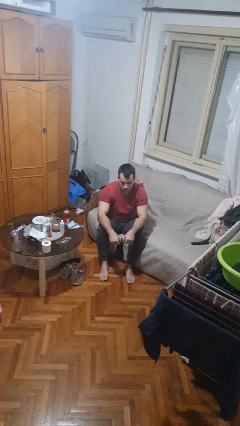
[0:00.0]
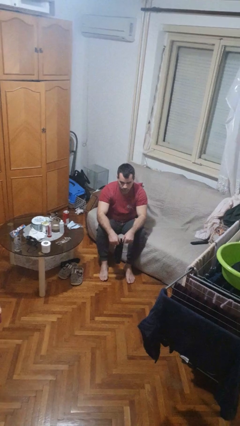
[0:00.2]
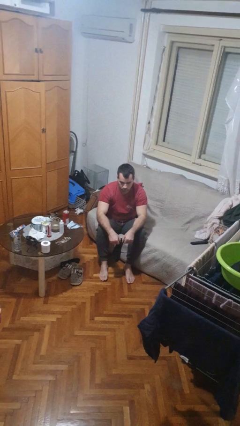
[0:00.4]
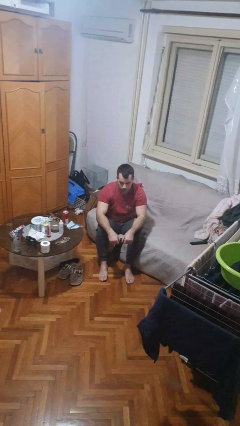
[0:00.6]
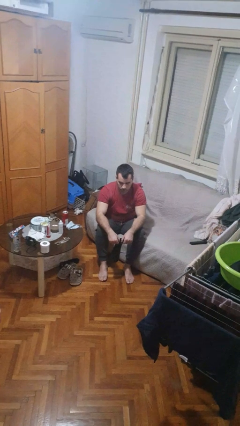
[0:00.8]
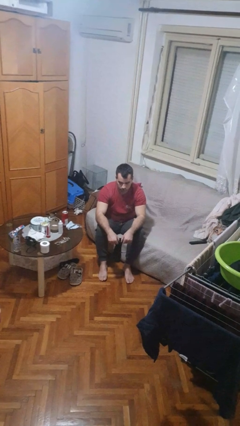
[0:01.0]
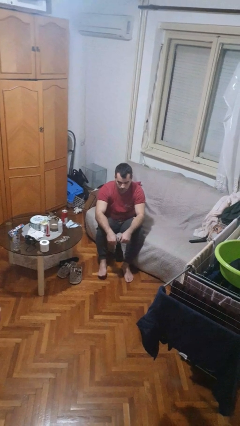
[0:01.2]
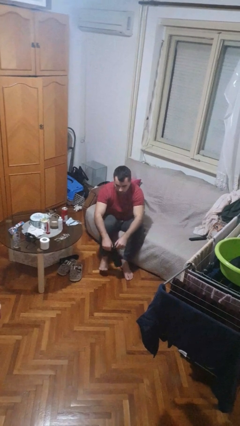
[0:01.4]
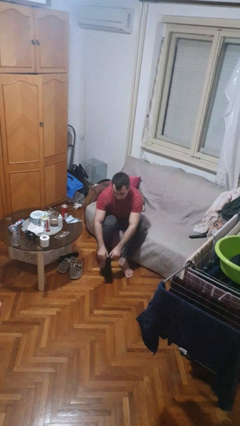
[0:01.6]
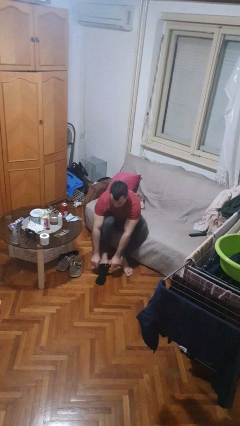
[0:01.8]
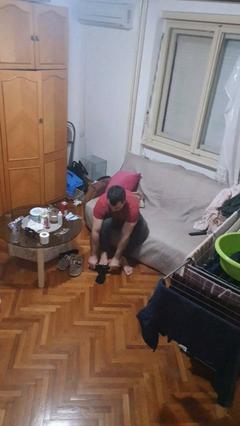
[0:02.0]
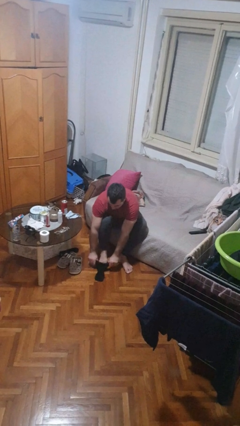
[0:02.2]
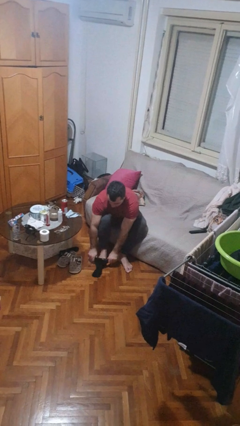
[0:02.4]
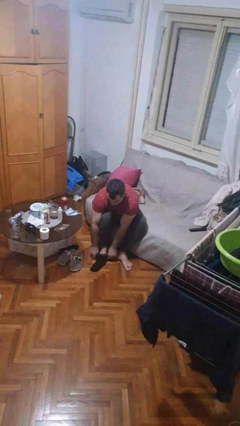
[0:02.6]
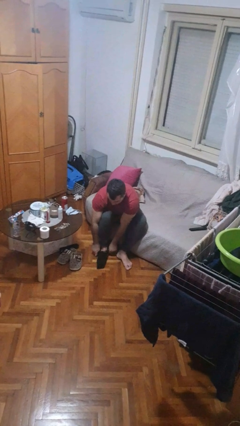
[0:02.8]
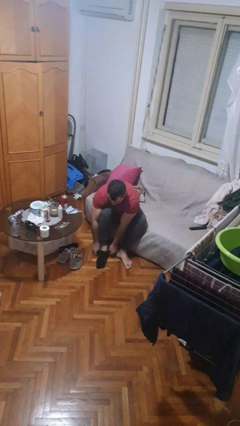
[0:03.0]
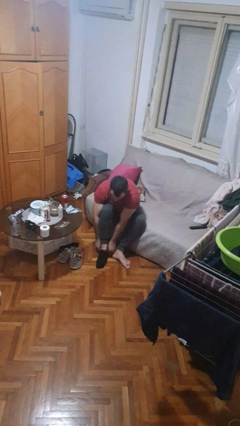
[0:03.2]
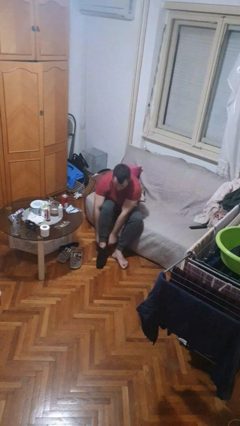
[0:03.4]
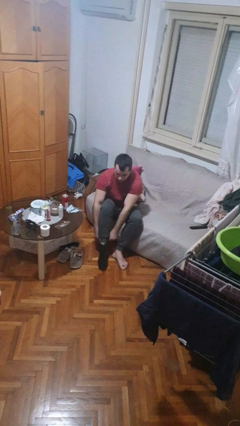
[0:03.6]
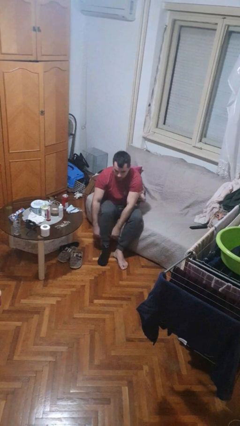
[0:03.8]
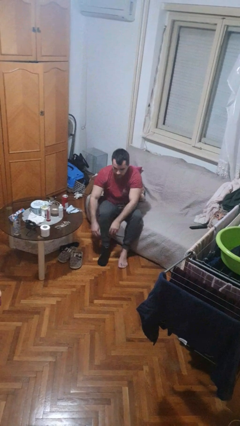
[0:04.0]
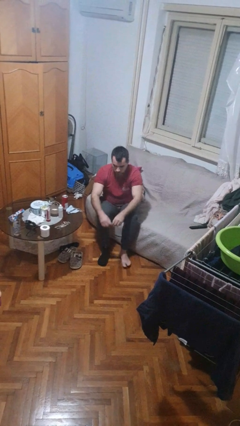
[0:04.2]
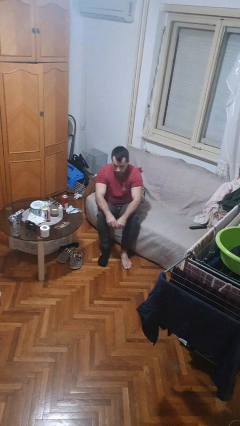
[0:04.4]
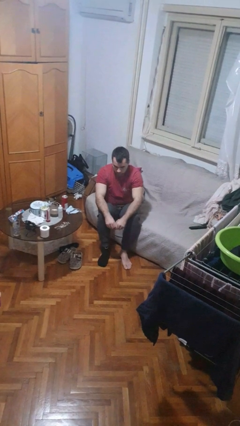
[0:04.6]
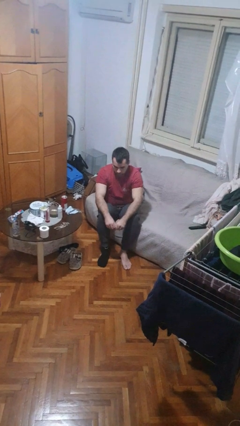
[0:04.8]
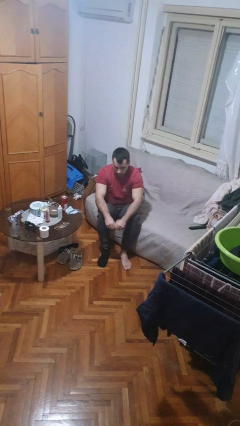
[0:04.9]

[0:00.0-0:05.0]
person puts on socks

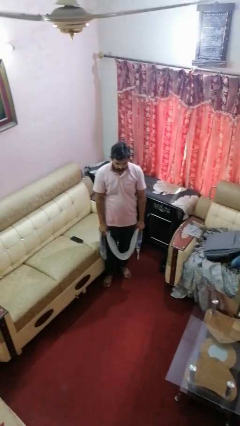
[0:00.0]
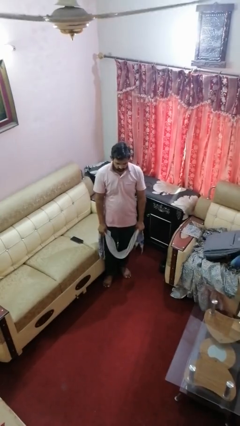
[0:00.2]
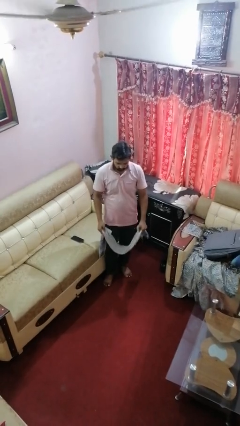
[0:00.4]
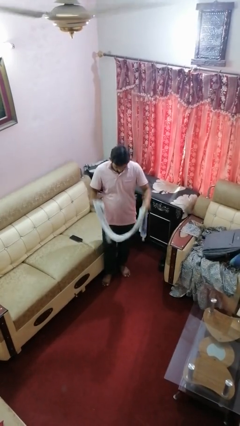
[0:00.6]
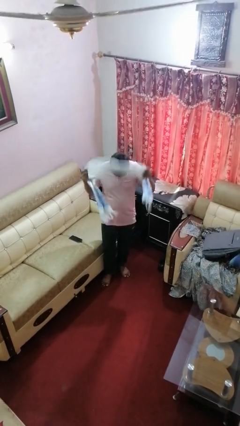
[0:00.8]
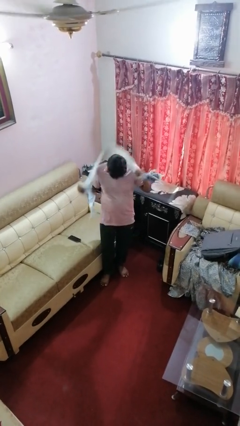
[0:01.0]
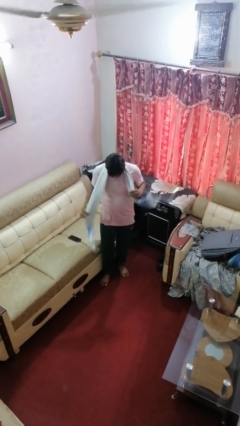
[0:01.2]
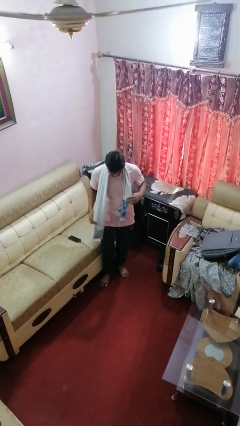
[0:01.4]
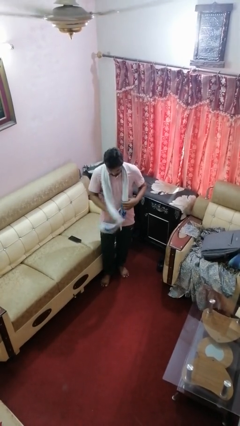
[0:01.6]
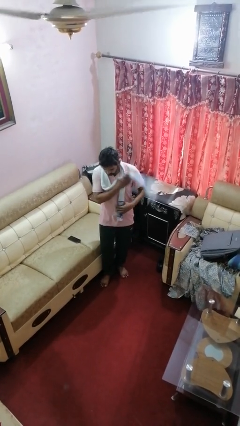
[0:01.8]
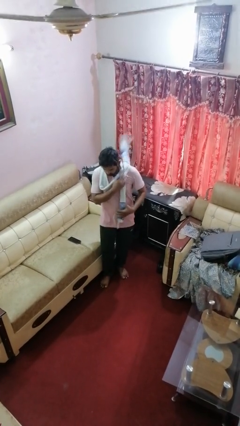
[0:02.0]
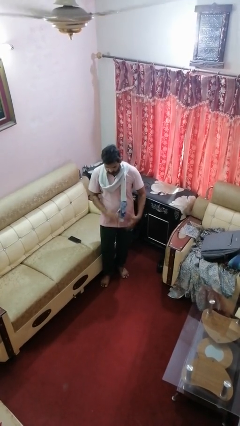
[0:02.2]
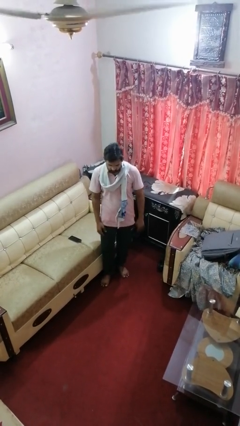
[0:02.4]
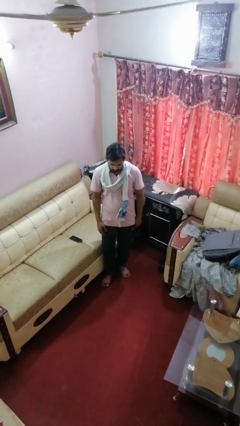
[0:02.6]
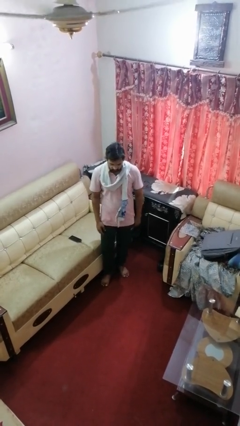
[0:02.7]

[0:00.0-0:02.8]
person puts on scarf

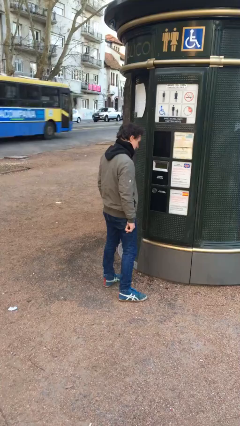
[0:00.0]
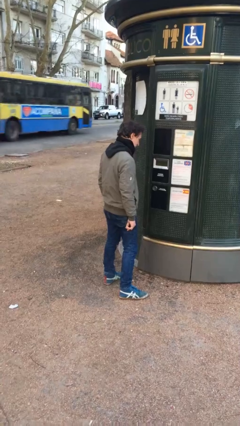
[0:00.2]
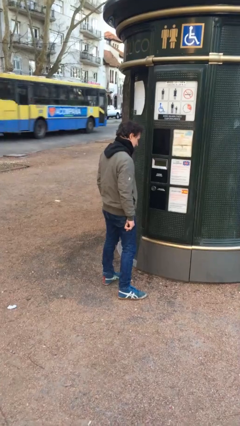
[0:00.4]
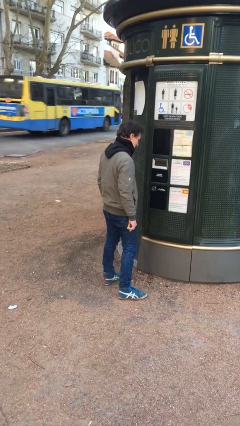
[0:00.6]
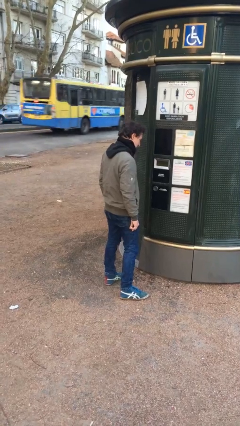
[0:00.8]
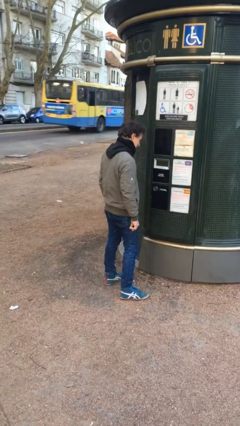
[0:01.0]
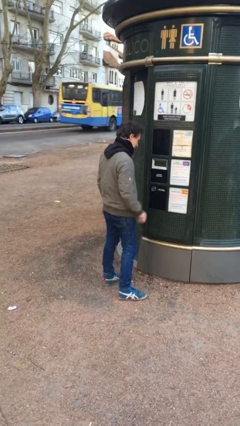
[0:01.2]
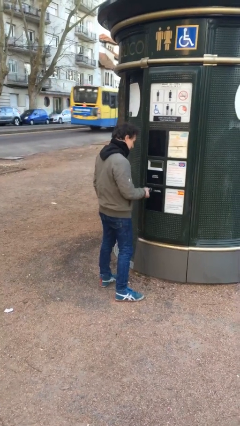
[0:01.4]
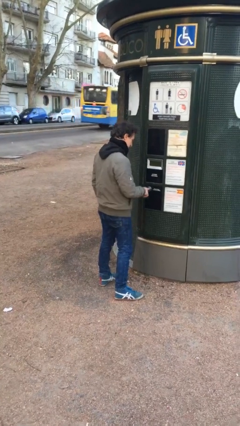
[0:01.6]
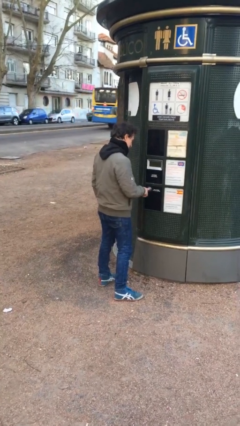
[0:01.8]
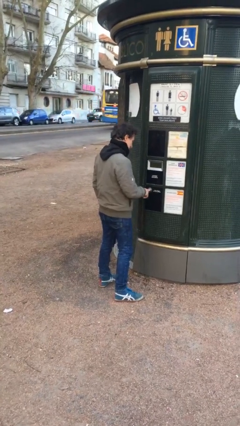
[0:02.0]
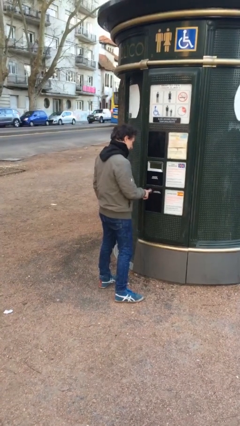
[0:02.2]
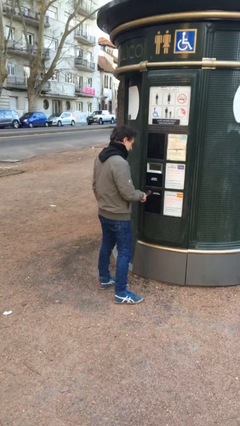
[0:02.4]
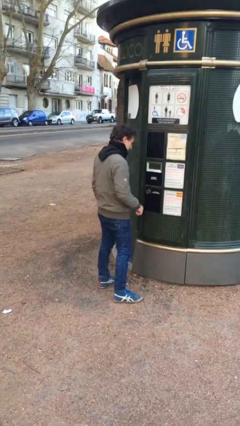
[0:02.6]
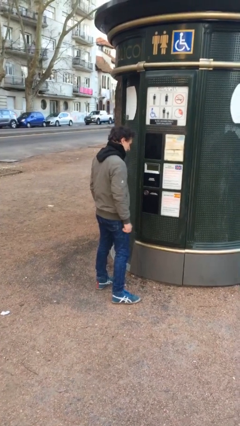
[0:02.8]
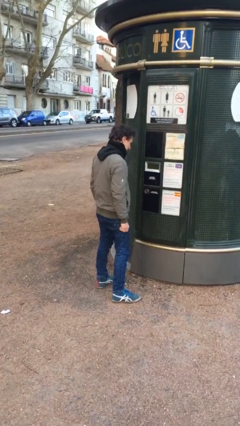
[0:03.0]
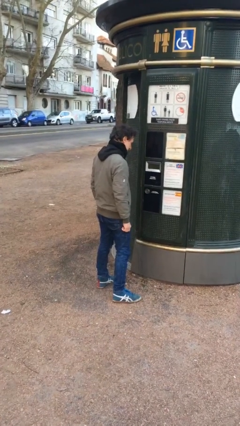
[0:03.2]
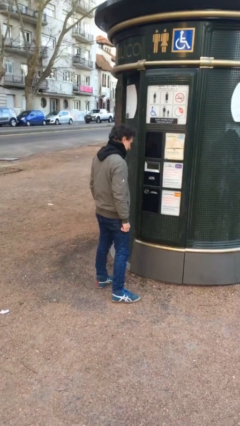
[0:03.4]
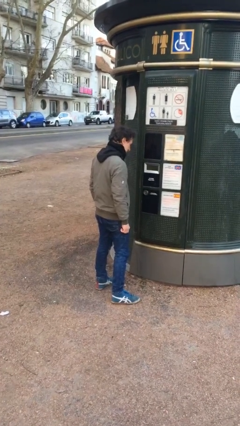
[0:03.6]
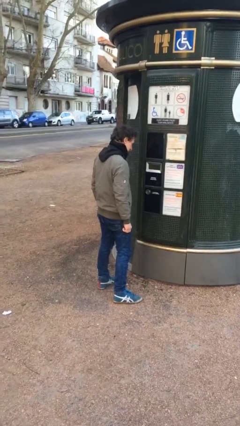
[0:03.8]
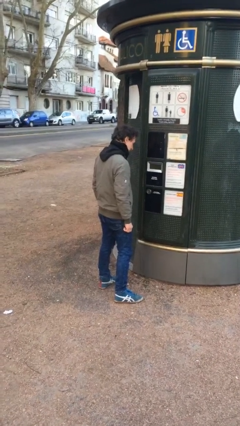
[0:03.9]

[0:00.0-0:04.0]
person purchases from machine

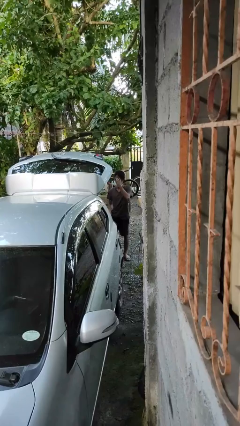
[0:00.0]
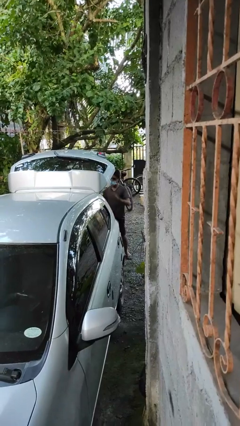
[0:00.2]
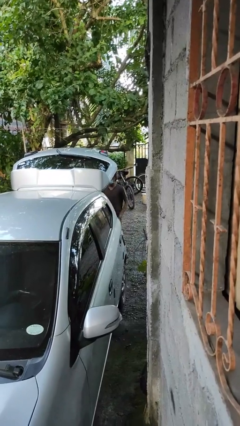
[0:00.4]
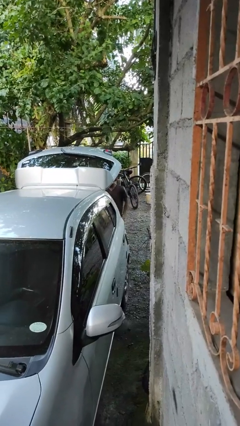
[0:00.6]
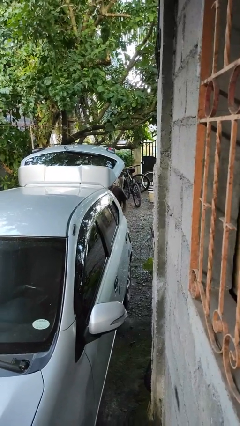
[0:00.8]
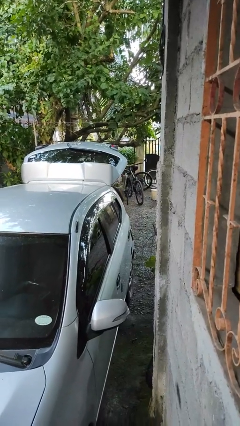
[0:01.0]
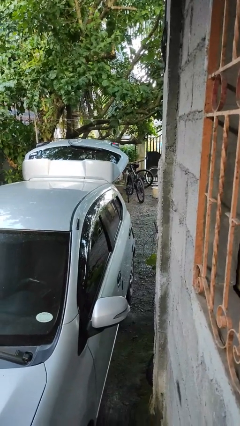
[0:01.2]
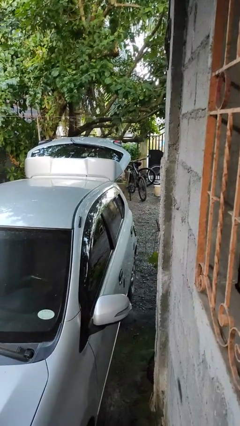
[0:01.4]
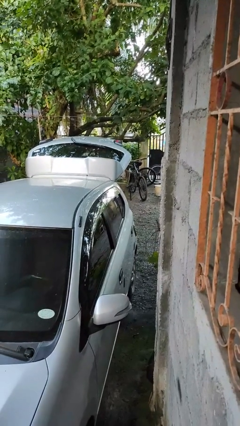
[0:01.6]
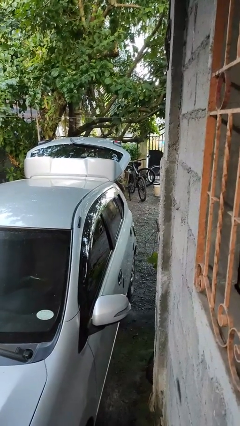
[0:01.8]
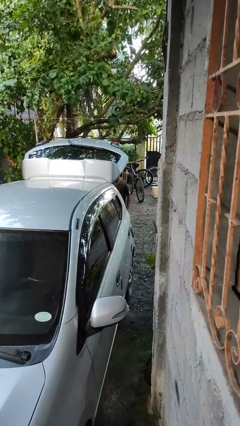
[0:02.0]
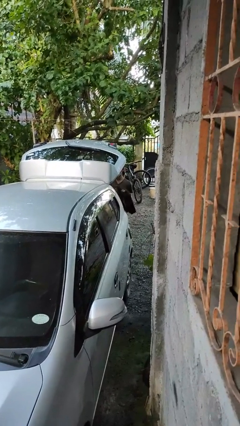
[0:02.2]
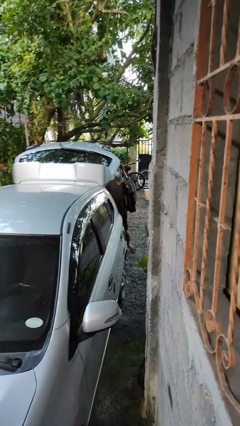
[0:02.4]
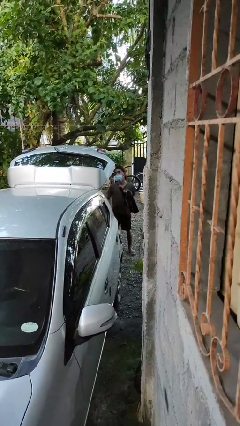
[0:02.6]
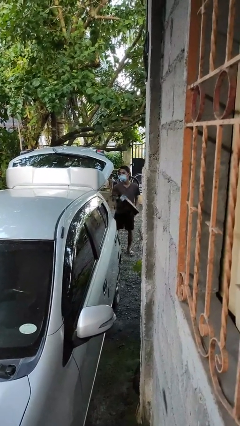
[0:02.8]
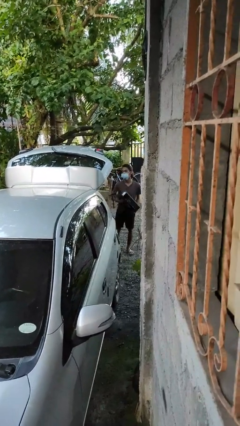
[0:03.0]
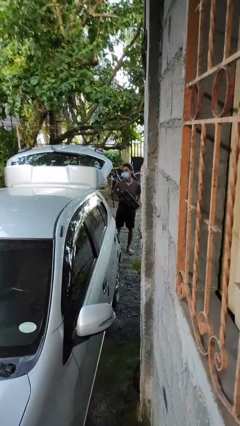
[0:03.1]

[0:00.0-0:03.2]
person unloads car

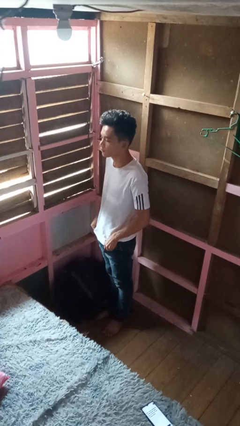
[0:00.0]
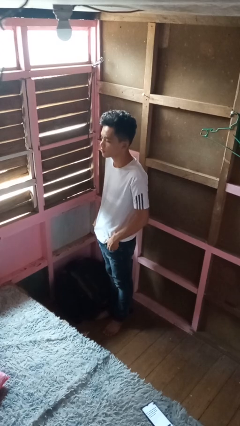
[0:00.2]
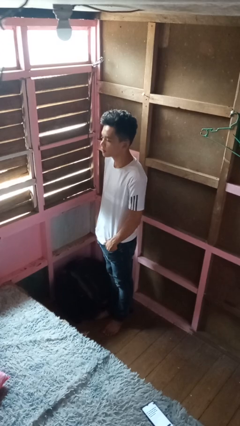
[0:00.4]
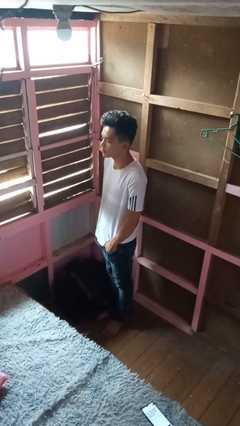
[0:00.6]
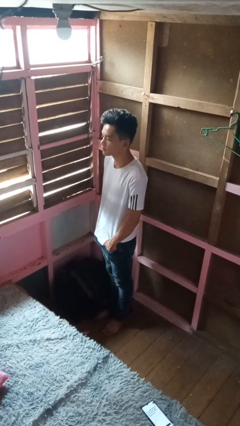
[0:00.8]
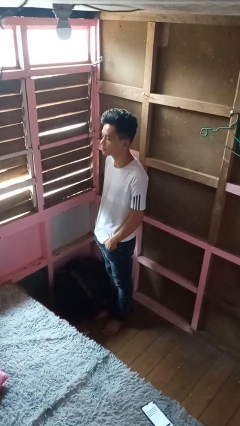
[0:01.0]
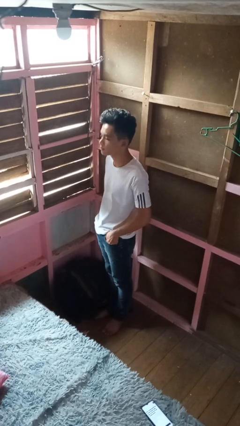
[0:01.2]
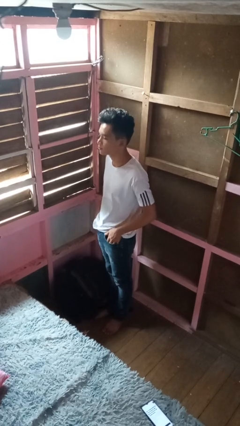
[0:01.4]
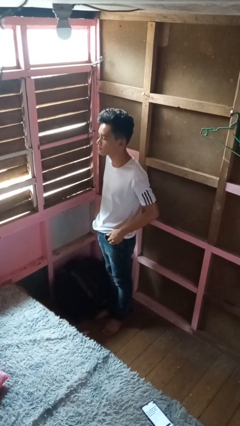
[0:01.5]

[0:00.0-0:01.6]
person puts hands in back pockets

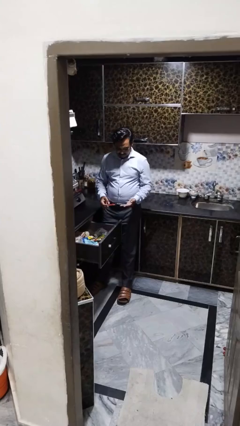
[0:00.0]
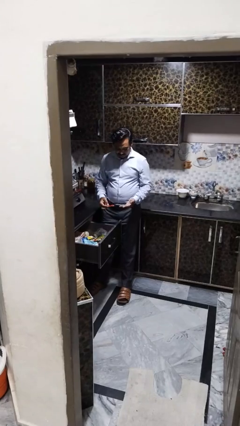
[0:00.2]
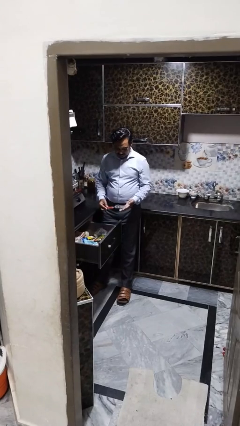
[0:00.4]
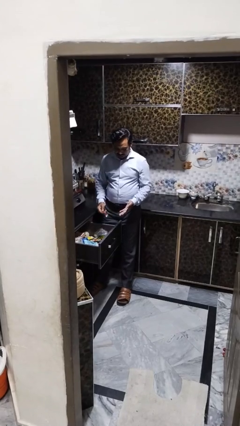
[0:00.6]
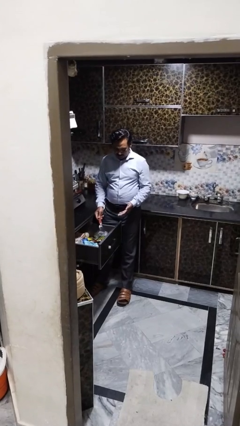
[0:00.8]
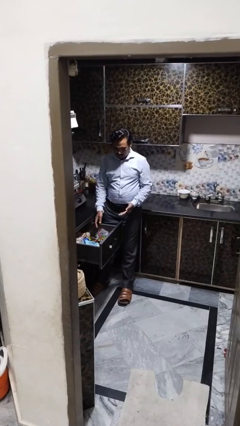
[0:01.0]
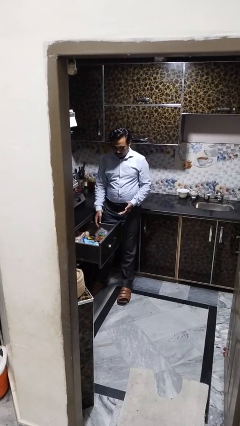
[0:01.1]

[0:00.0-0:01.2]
person puts object into kitchen drawer
